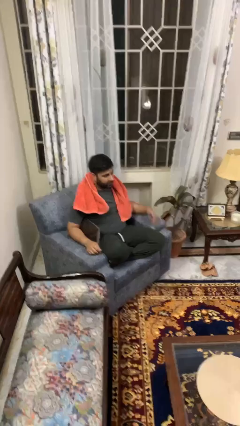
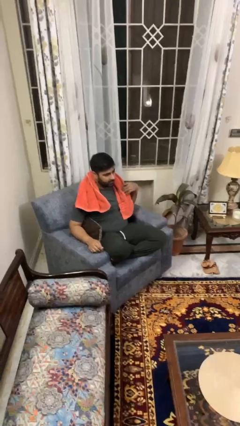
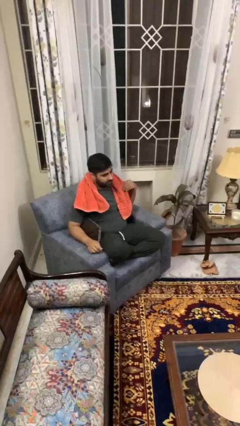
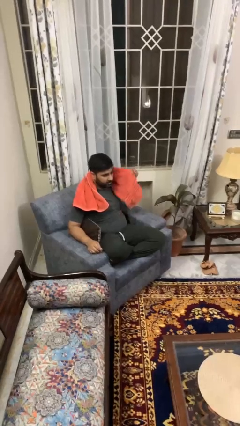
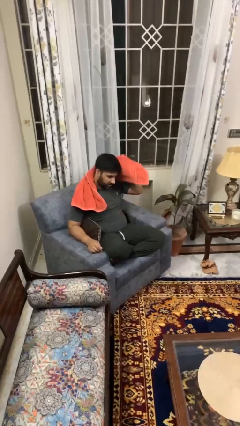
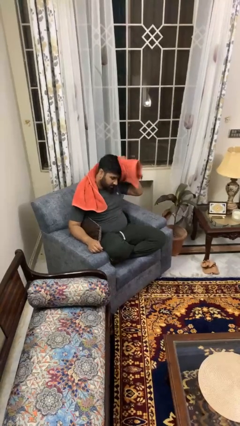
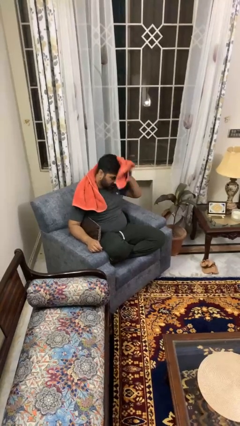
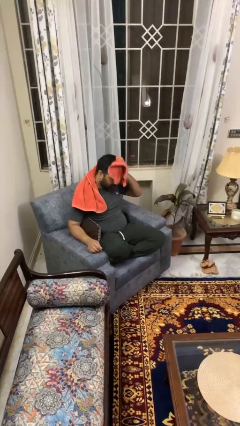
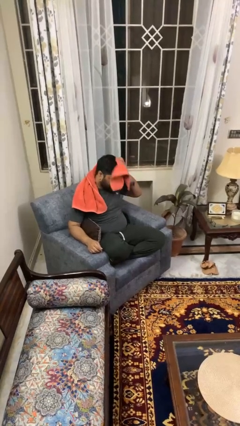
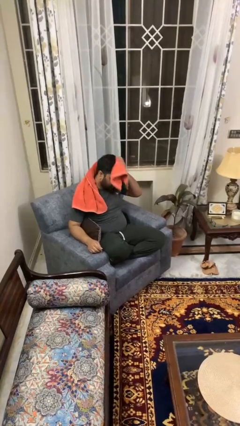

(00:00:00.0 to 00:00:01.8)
person dries hair with towel

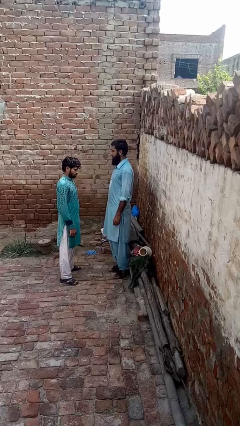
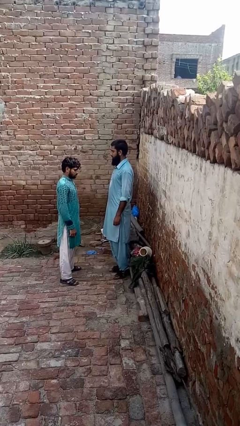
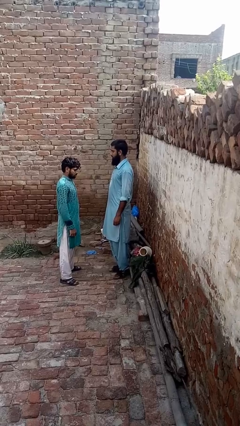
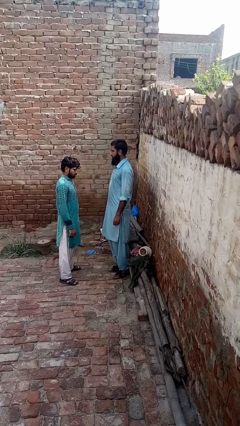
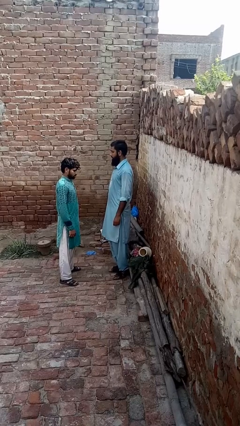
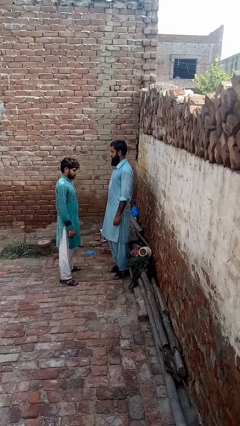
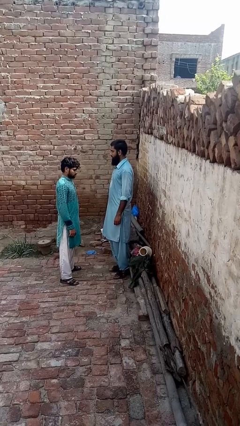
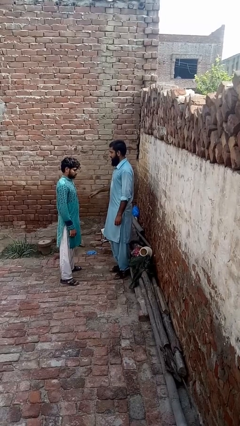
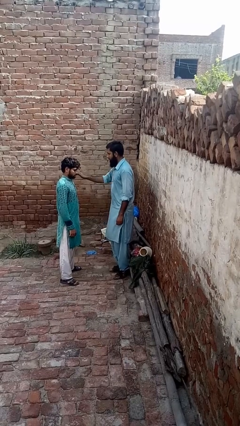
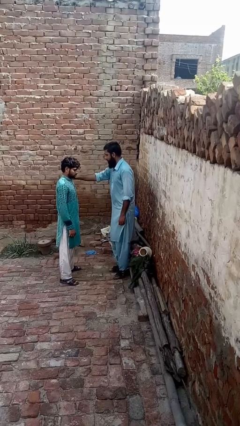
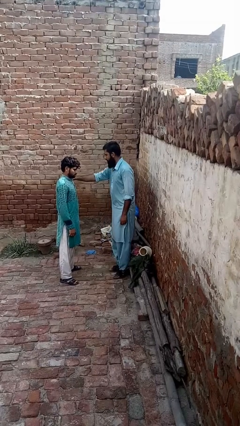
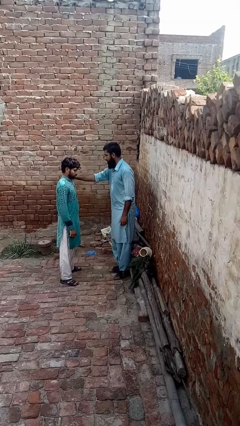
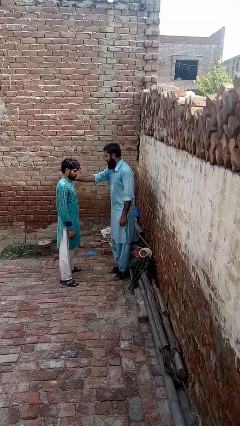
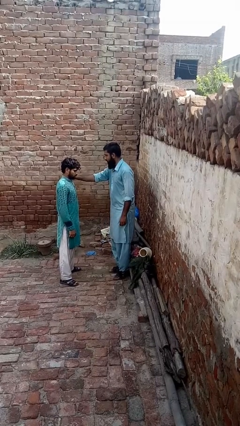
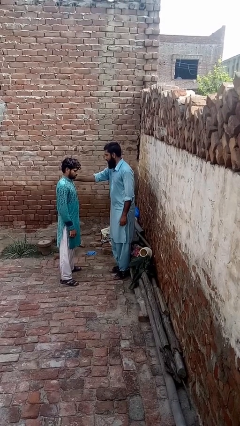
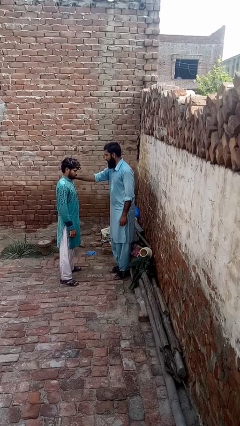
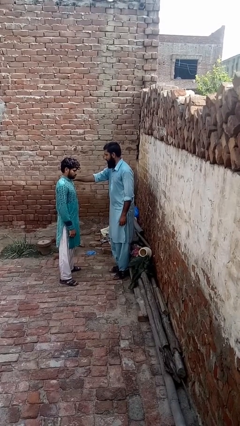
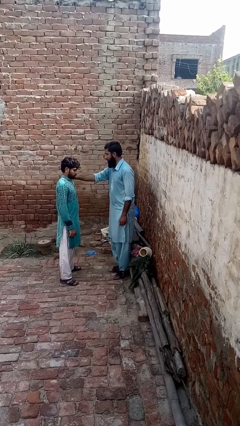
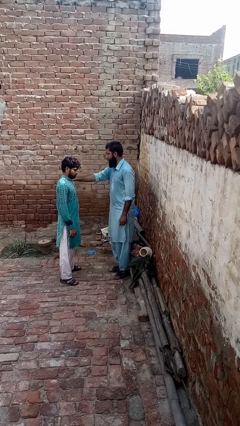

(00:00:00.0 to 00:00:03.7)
person pounds shoulders of person

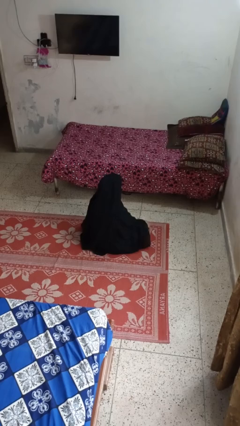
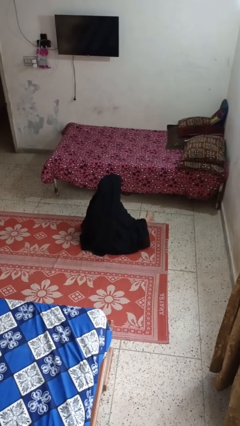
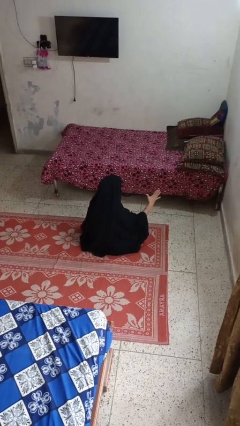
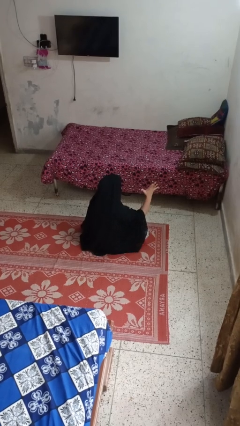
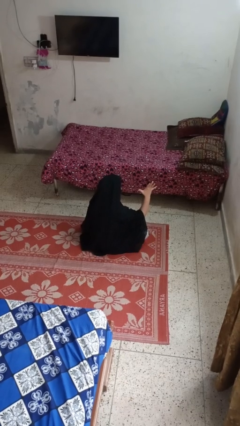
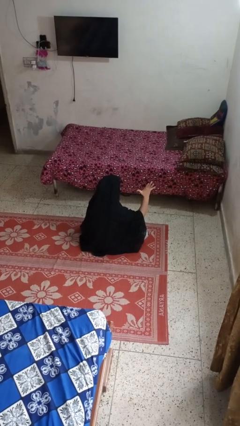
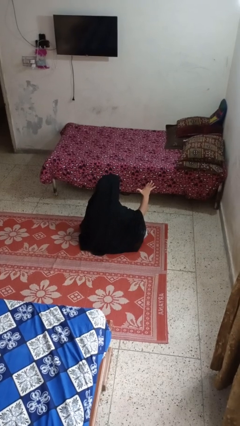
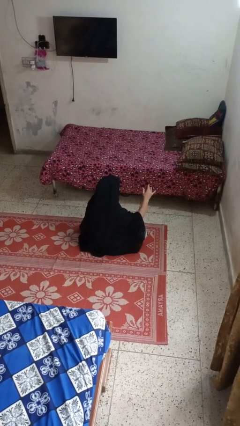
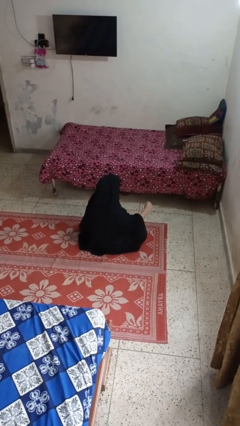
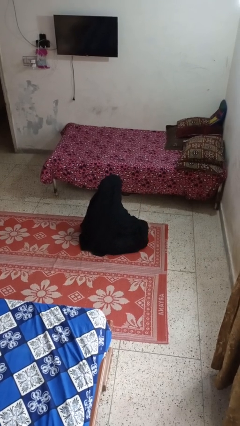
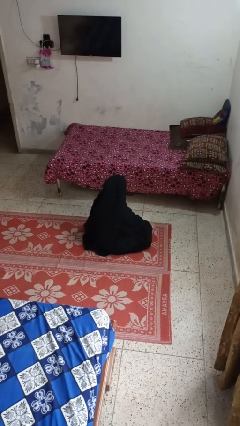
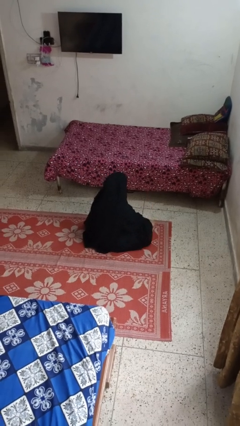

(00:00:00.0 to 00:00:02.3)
person gestures number five

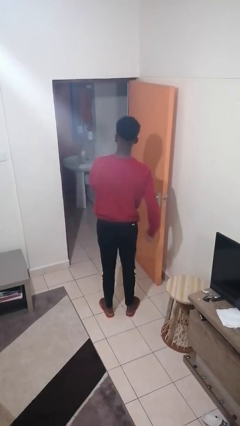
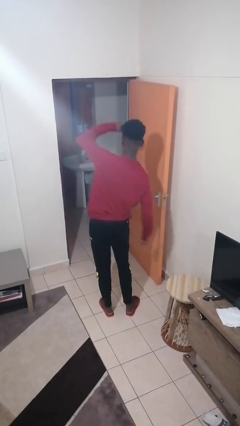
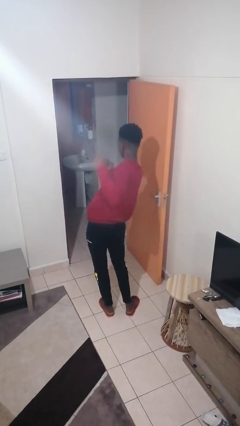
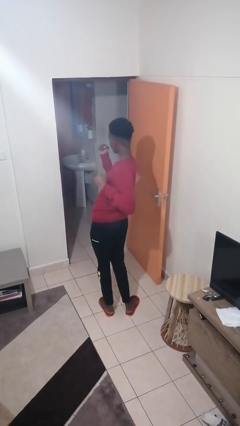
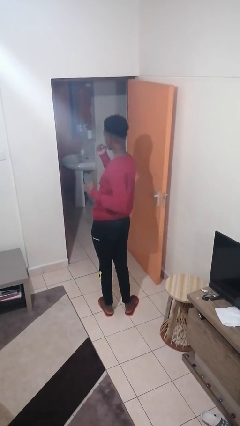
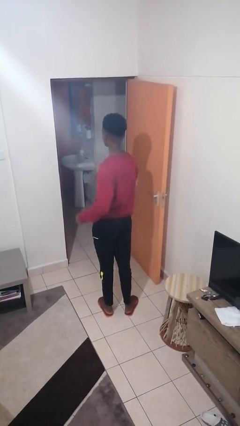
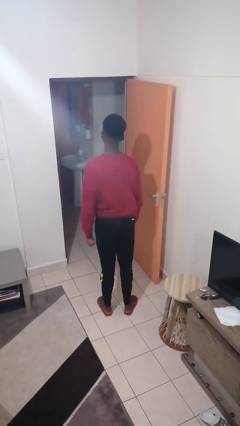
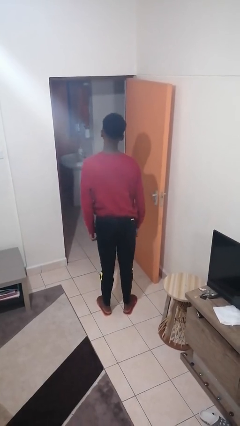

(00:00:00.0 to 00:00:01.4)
person punches

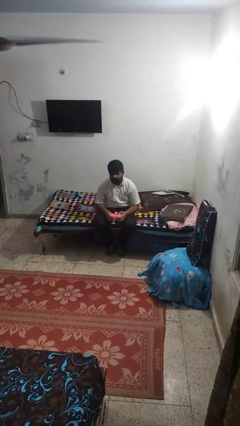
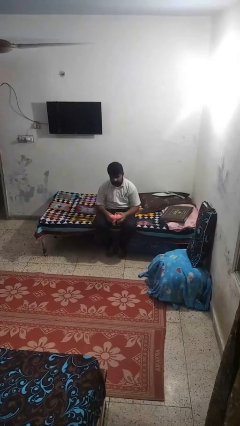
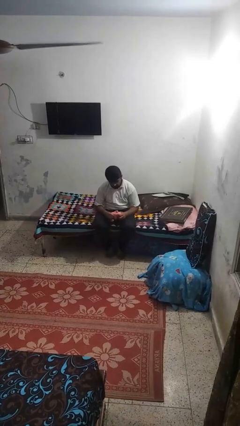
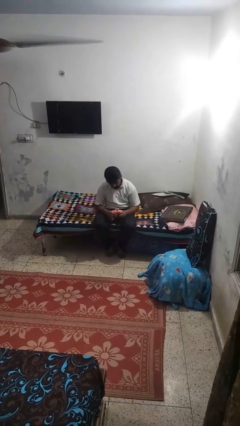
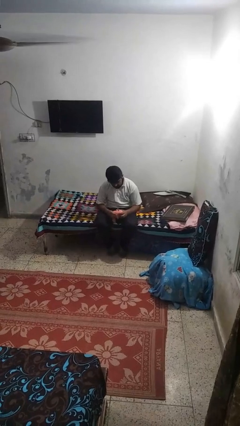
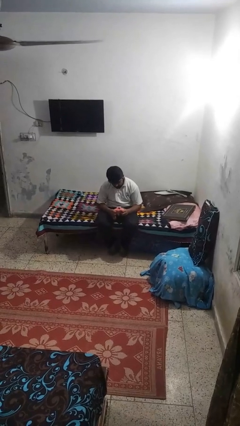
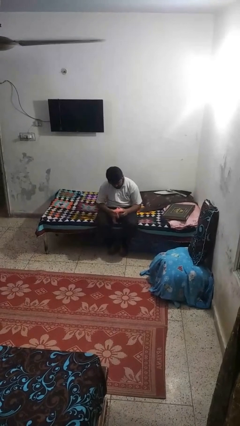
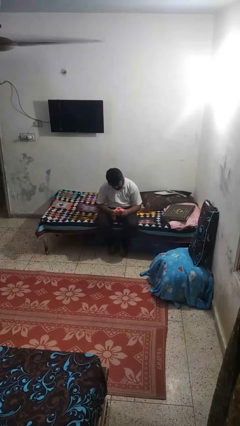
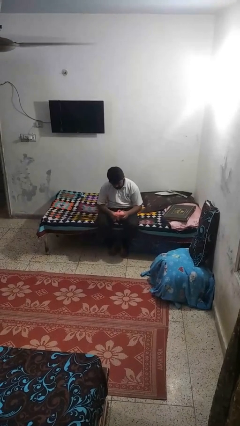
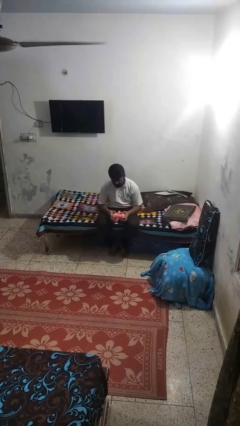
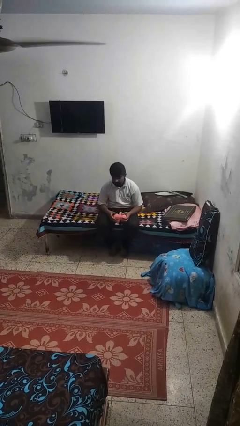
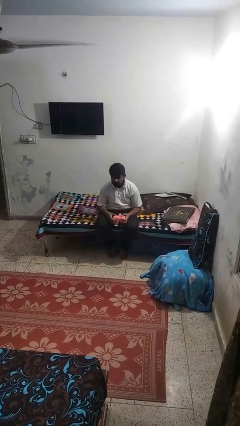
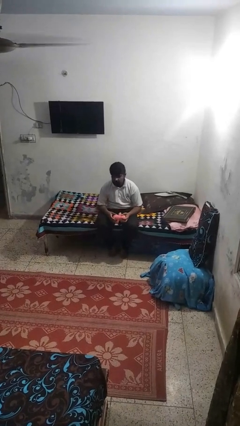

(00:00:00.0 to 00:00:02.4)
person squeezes object

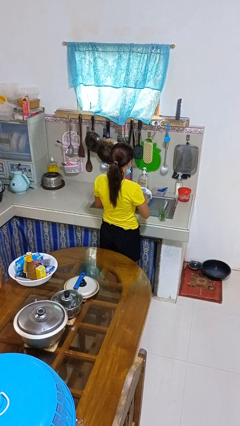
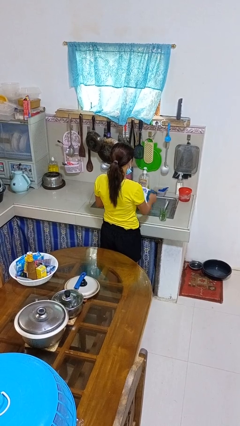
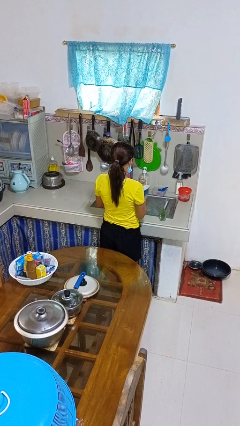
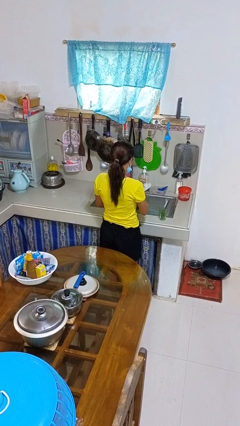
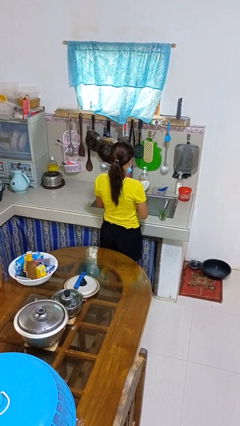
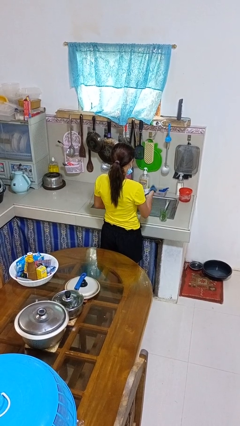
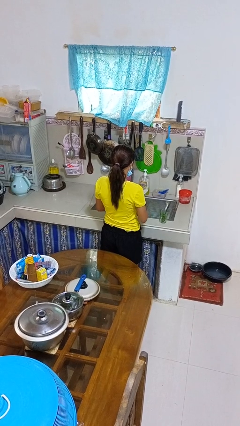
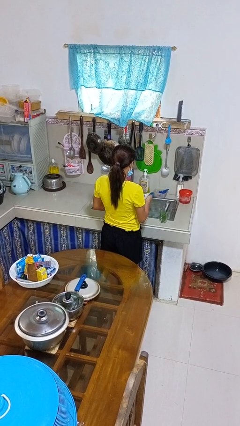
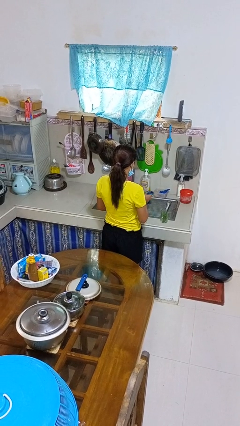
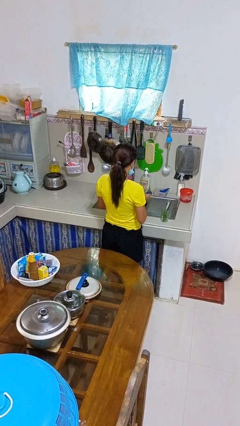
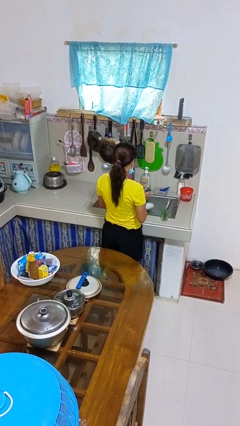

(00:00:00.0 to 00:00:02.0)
person dries dish

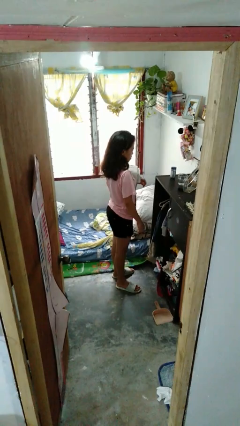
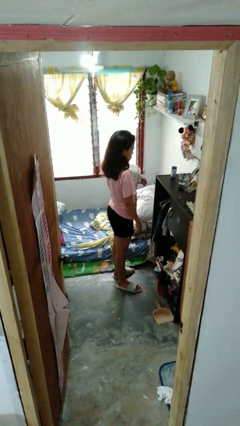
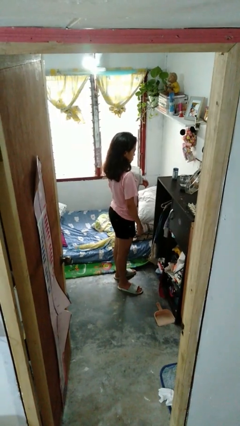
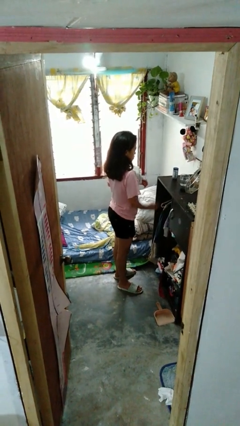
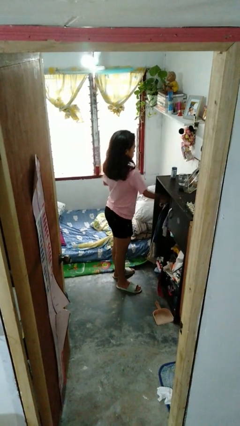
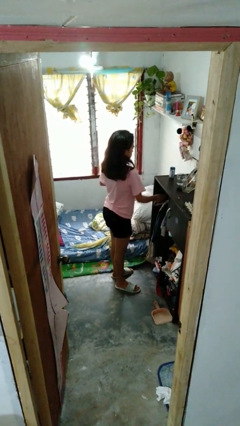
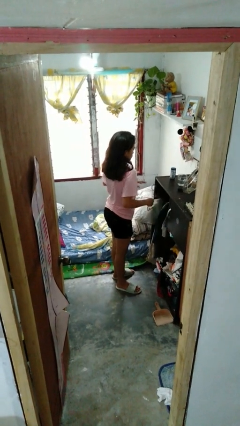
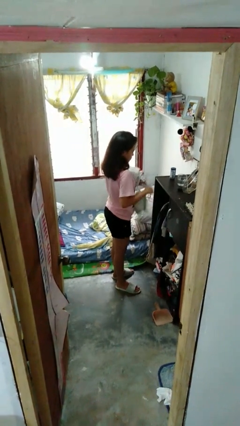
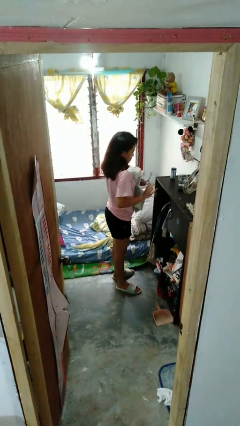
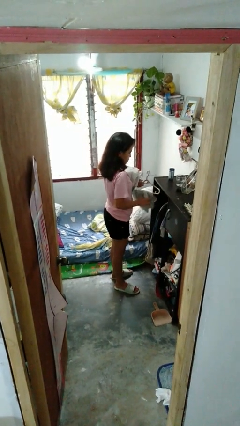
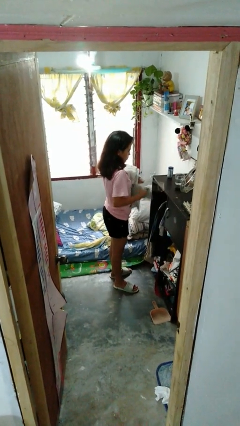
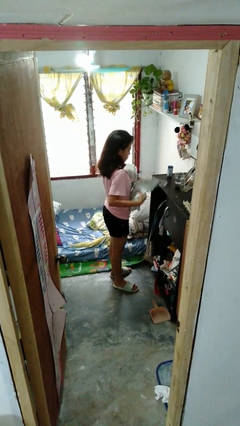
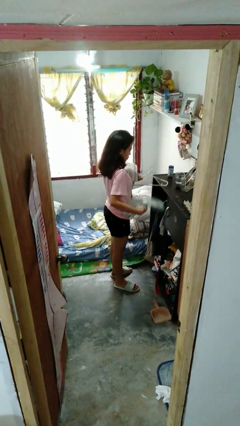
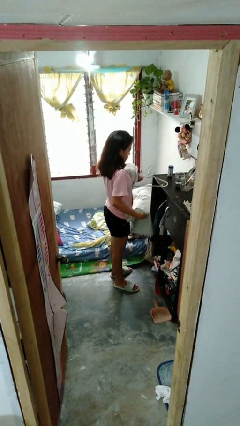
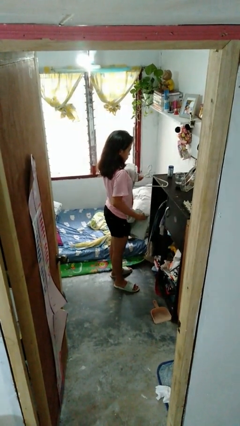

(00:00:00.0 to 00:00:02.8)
person takes clothes from closet

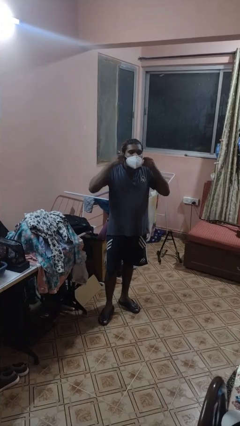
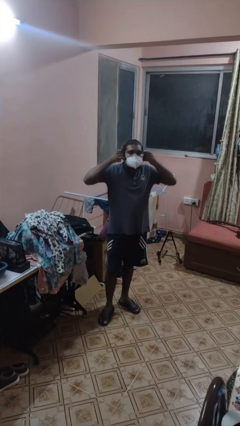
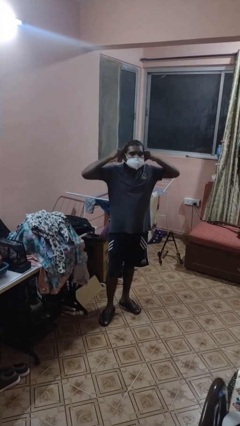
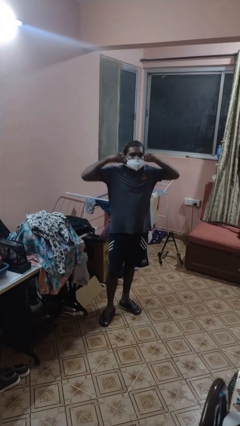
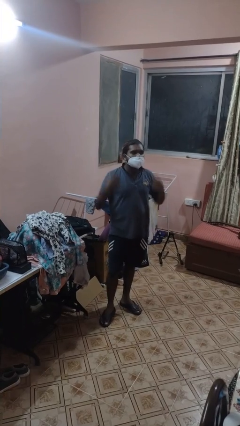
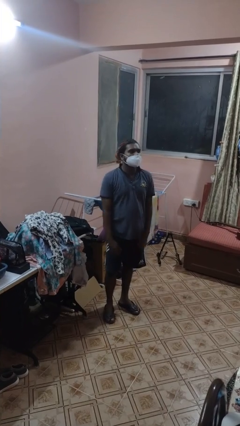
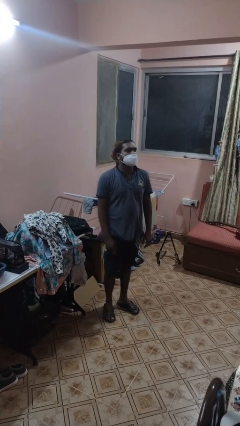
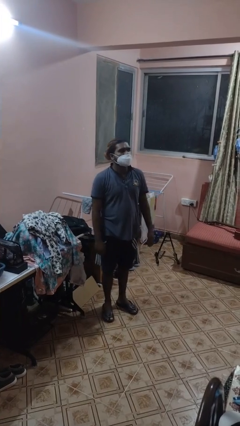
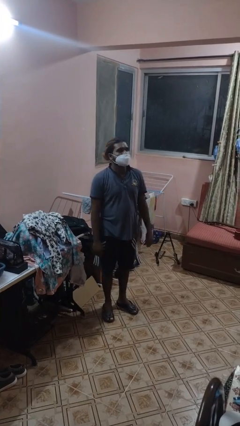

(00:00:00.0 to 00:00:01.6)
person puts on facemask
